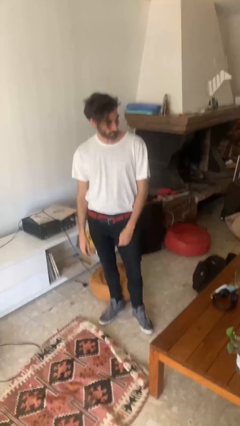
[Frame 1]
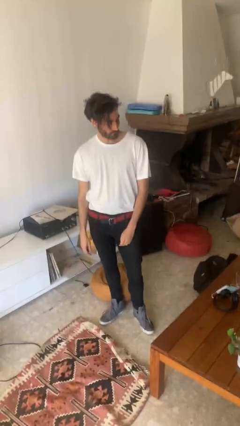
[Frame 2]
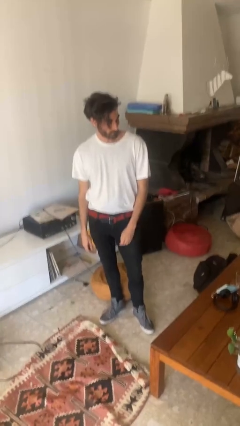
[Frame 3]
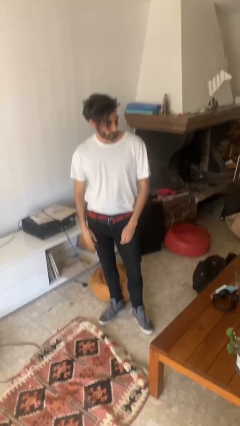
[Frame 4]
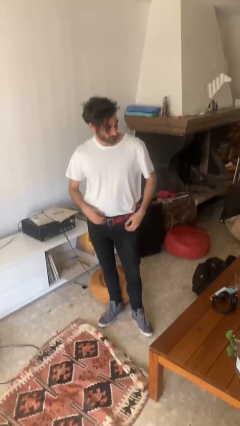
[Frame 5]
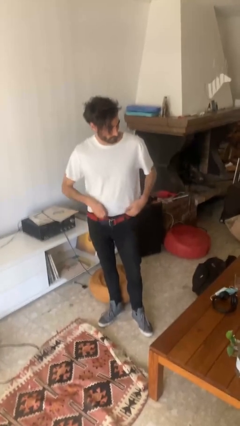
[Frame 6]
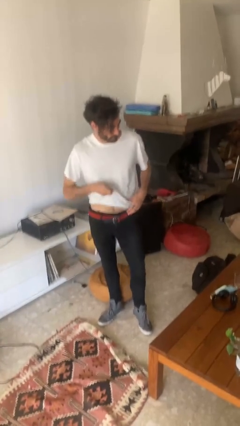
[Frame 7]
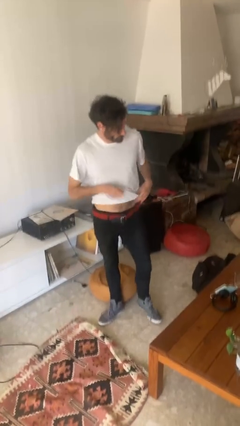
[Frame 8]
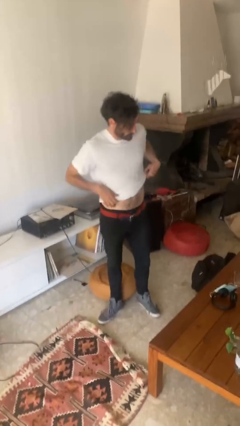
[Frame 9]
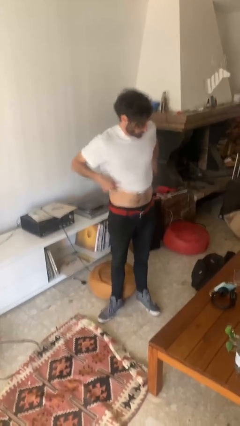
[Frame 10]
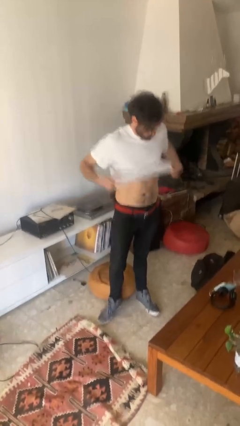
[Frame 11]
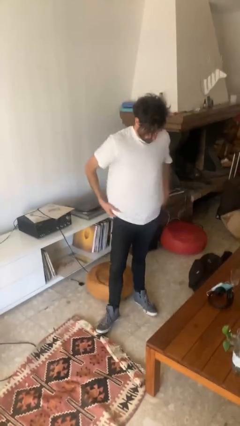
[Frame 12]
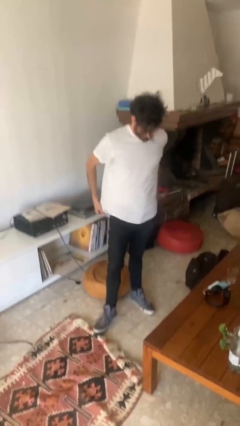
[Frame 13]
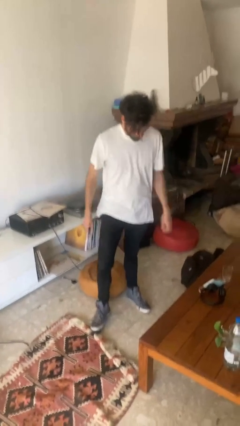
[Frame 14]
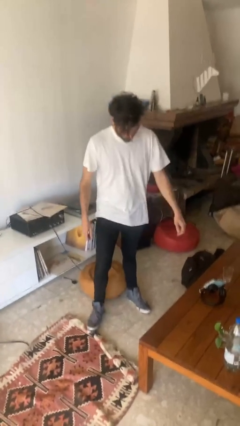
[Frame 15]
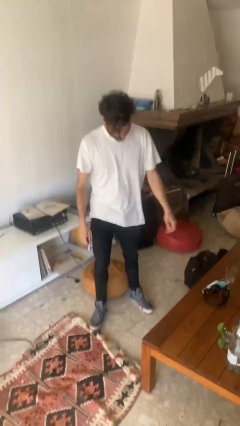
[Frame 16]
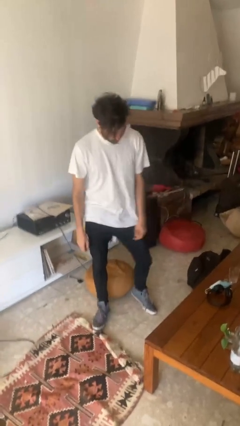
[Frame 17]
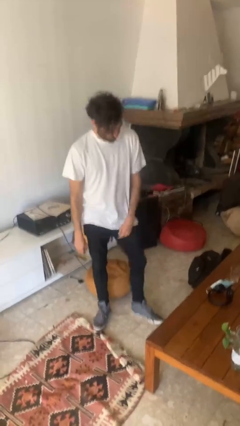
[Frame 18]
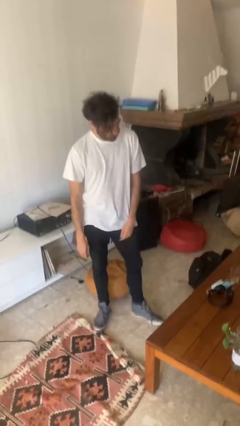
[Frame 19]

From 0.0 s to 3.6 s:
person untucks shirt

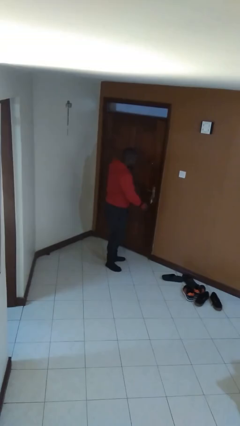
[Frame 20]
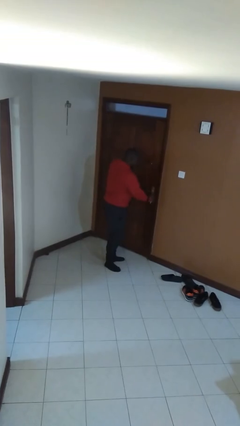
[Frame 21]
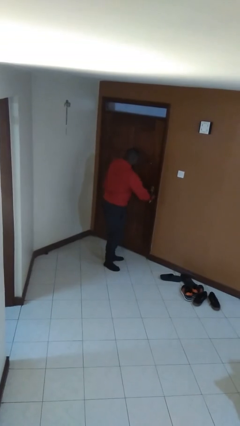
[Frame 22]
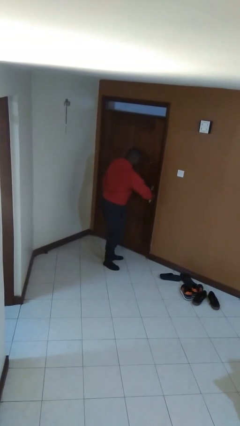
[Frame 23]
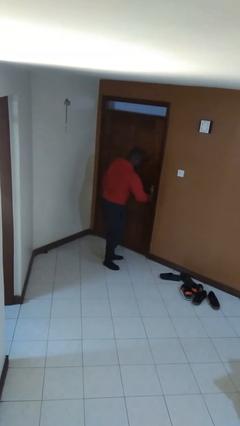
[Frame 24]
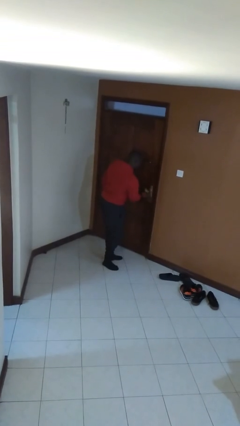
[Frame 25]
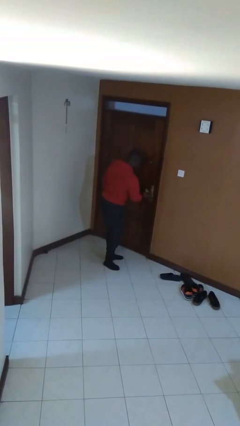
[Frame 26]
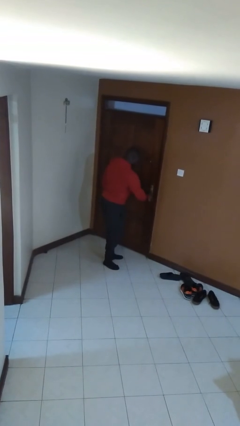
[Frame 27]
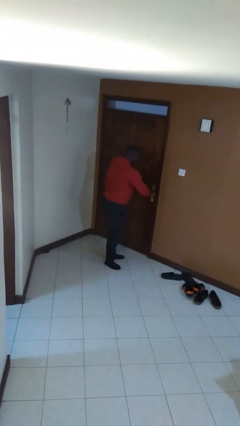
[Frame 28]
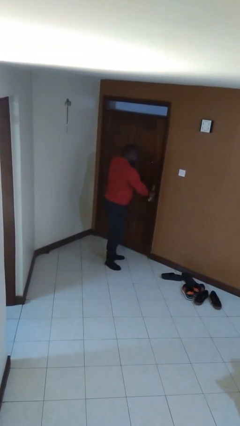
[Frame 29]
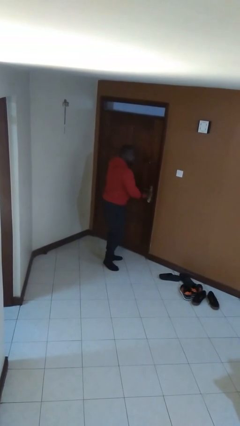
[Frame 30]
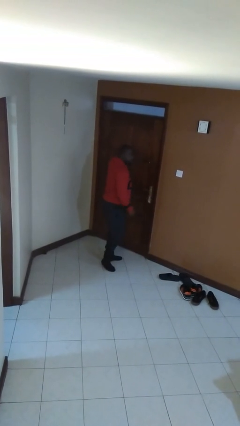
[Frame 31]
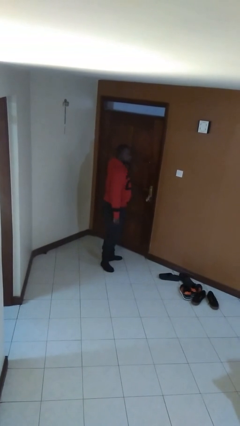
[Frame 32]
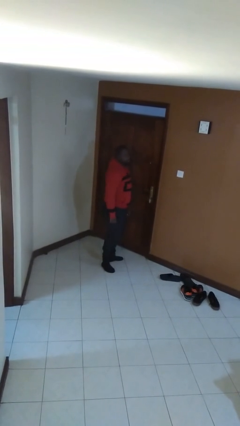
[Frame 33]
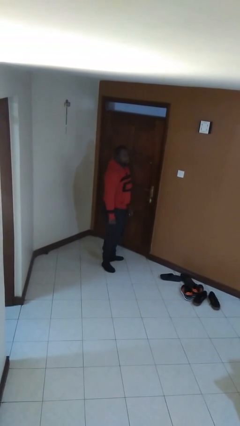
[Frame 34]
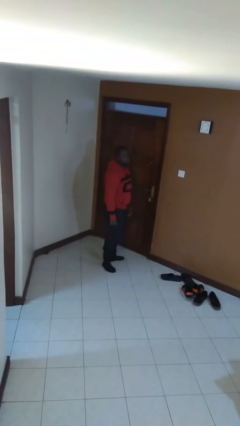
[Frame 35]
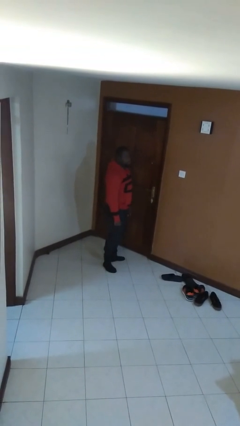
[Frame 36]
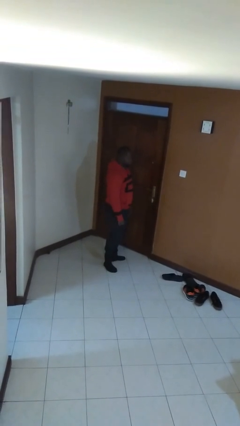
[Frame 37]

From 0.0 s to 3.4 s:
person locks door with keys

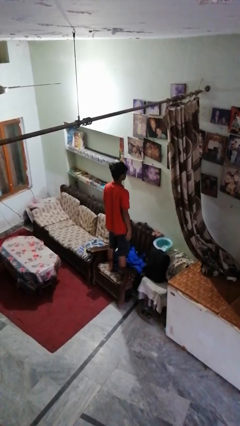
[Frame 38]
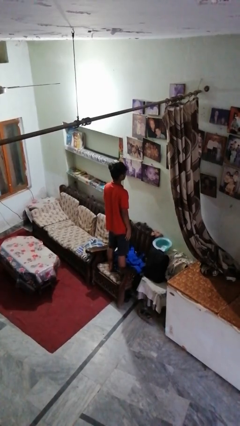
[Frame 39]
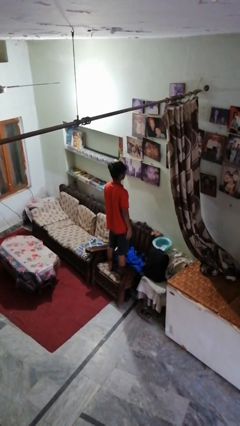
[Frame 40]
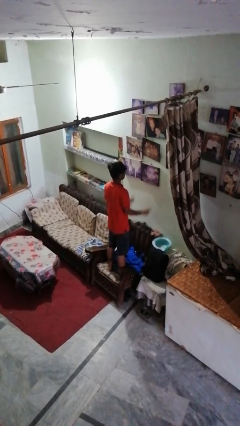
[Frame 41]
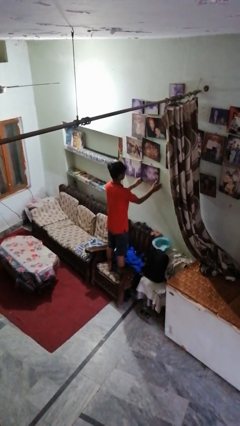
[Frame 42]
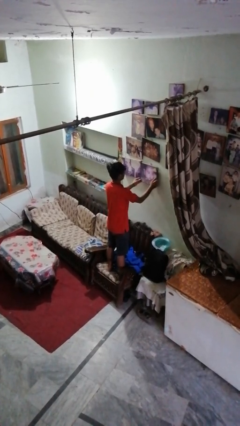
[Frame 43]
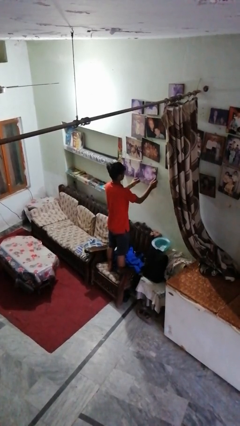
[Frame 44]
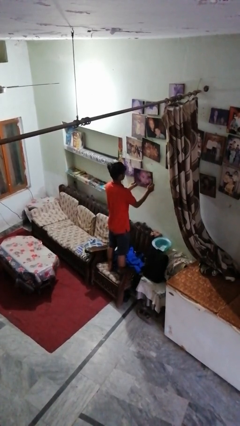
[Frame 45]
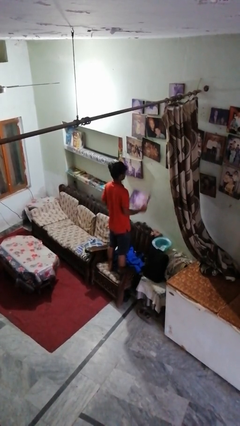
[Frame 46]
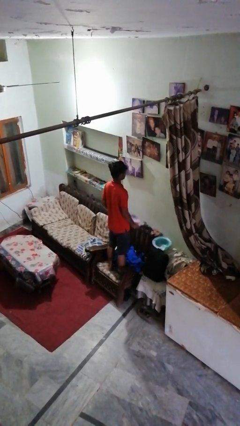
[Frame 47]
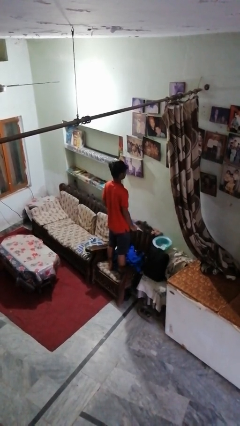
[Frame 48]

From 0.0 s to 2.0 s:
person takes down picture frame

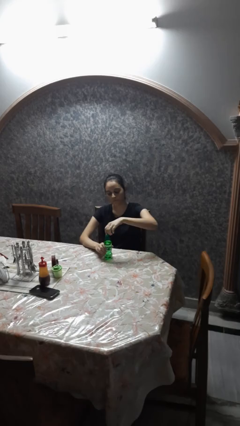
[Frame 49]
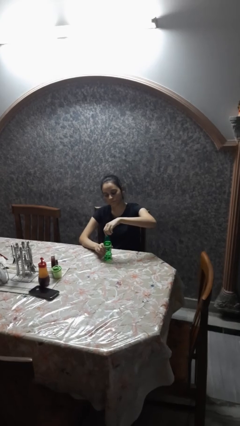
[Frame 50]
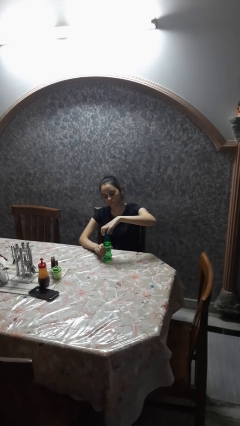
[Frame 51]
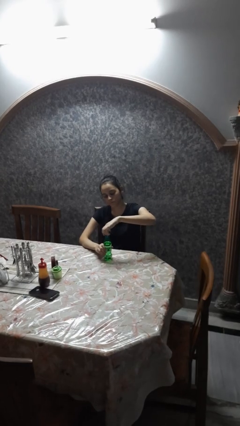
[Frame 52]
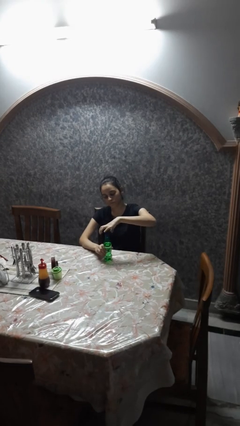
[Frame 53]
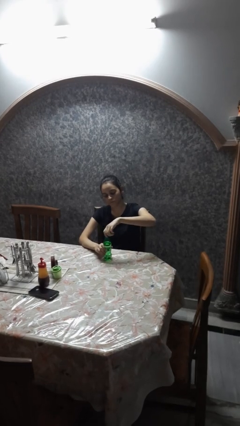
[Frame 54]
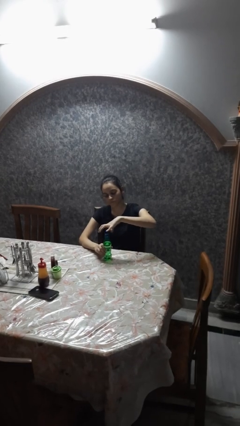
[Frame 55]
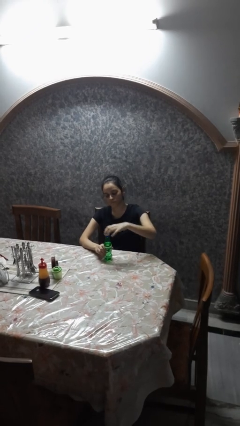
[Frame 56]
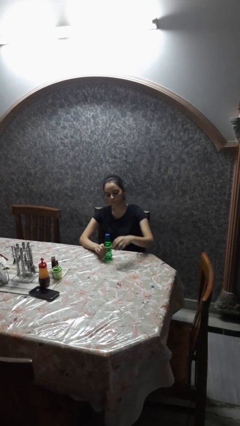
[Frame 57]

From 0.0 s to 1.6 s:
person screws lid to bottle

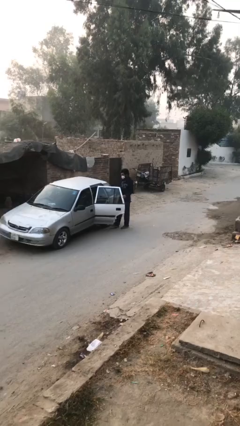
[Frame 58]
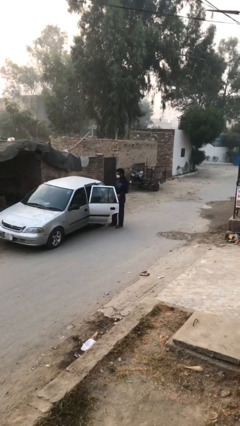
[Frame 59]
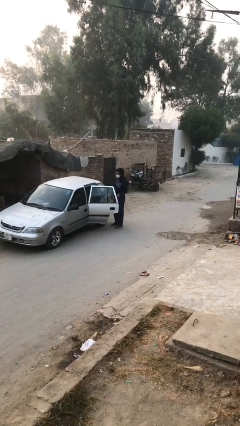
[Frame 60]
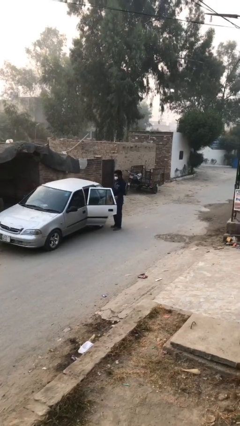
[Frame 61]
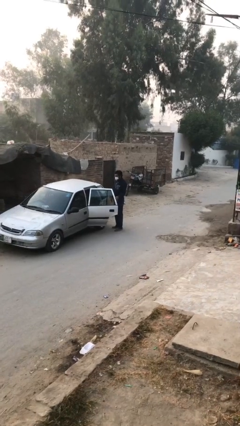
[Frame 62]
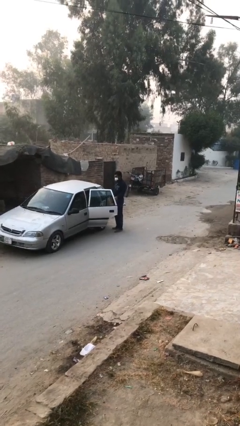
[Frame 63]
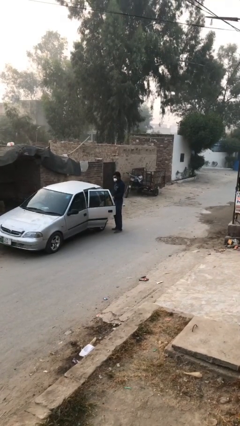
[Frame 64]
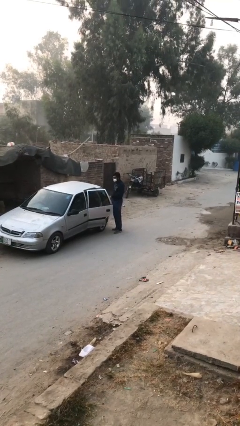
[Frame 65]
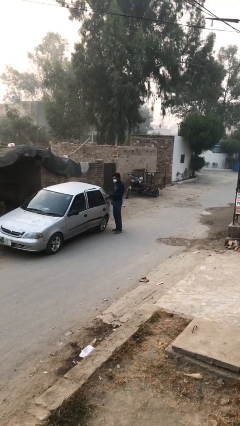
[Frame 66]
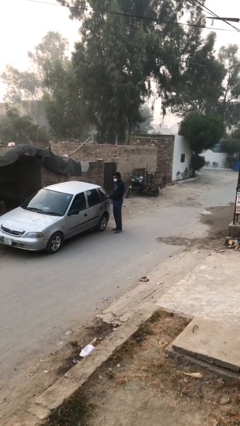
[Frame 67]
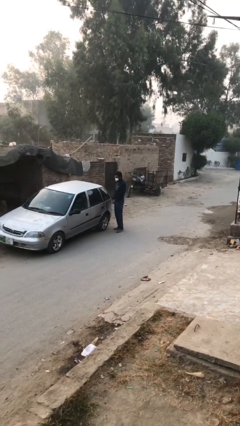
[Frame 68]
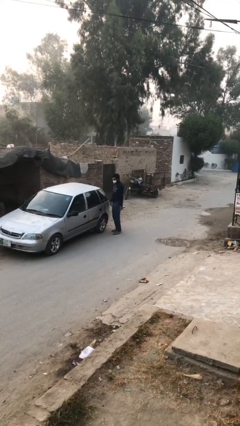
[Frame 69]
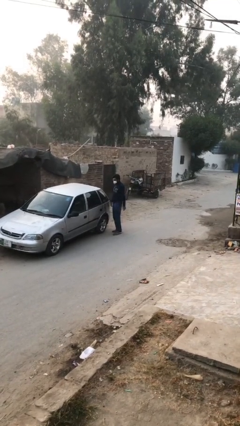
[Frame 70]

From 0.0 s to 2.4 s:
person closes car door

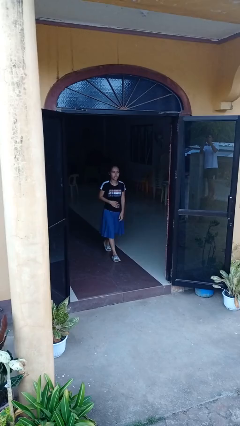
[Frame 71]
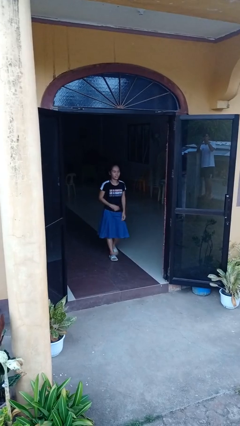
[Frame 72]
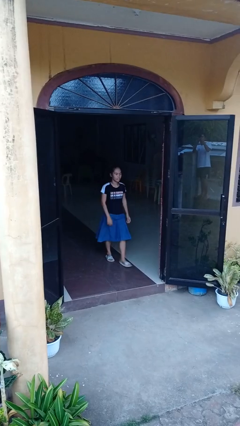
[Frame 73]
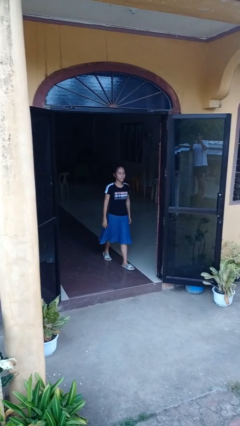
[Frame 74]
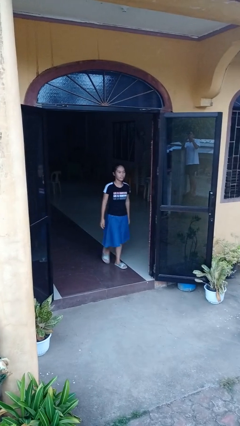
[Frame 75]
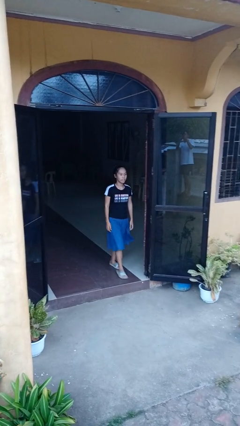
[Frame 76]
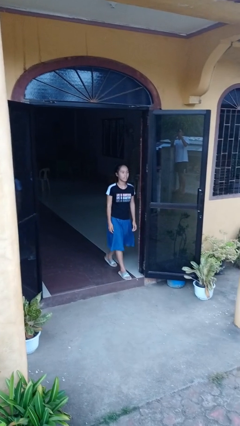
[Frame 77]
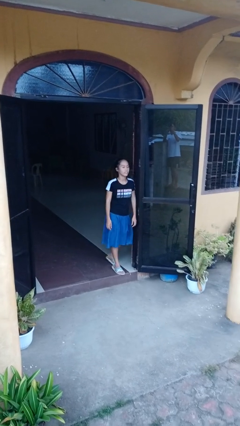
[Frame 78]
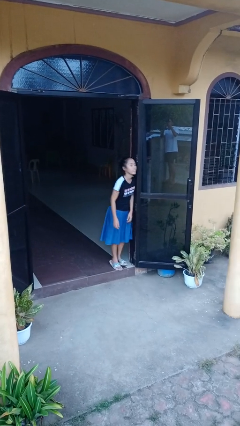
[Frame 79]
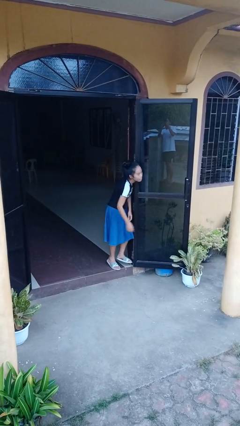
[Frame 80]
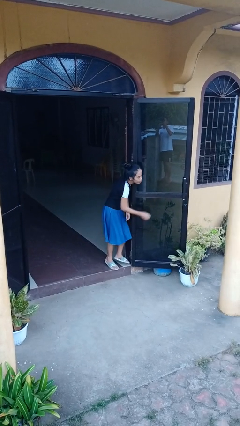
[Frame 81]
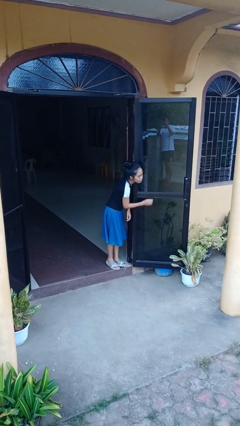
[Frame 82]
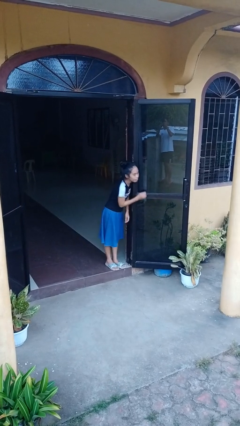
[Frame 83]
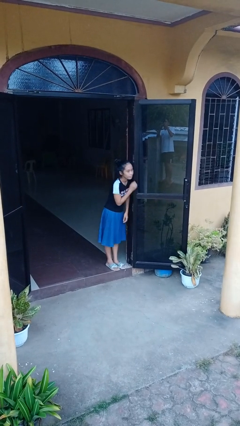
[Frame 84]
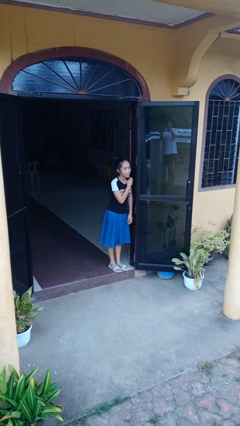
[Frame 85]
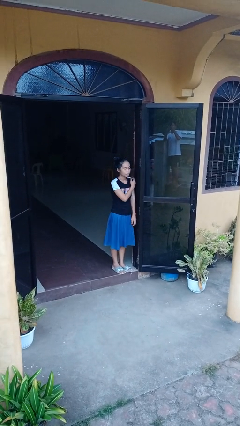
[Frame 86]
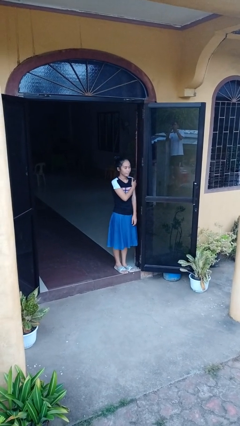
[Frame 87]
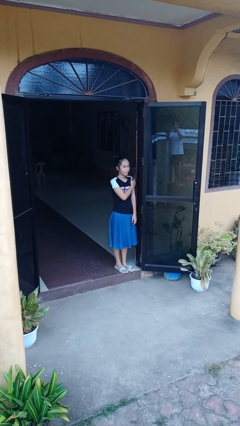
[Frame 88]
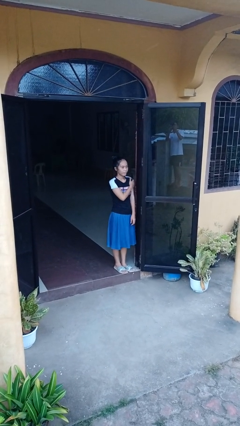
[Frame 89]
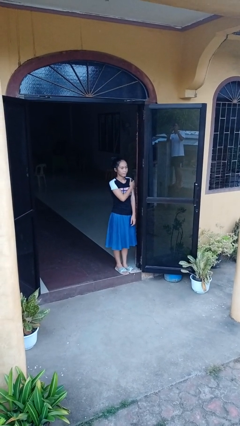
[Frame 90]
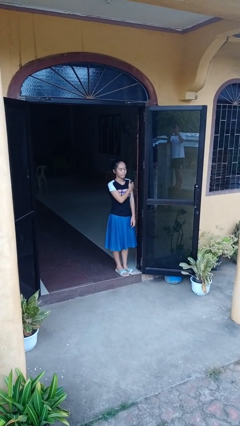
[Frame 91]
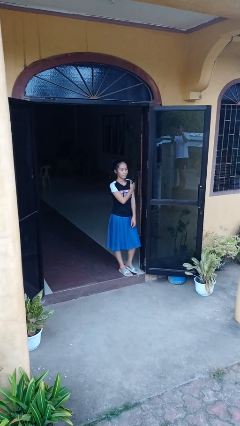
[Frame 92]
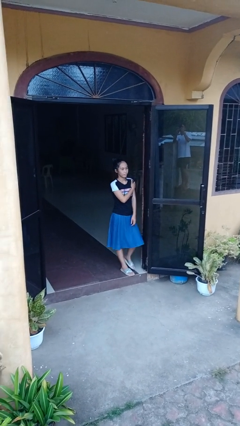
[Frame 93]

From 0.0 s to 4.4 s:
person bumps into wall
